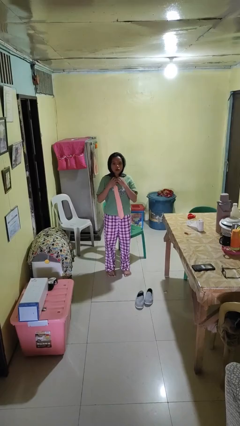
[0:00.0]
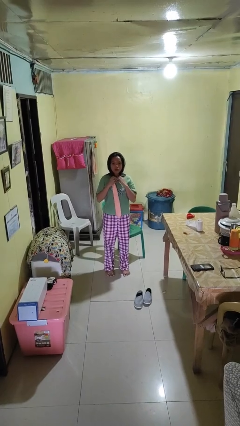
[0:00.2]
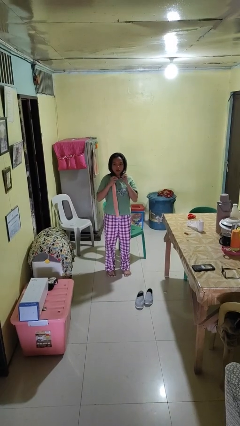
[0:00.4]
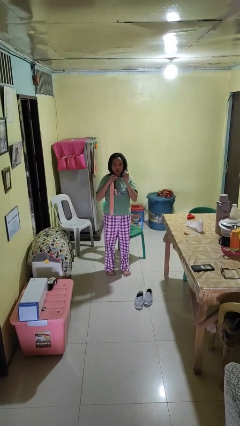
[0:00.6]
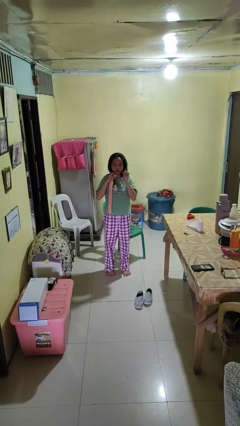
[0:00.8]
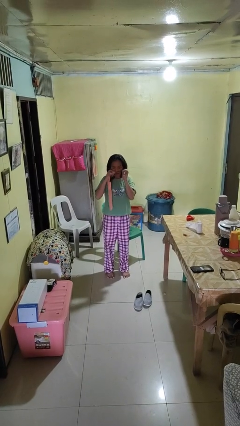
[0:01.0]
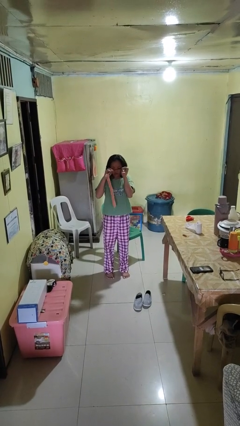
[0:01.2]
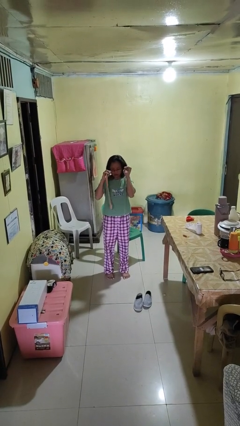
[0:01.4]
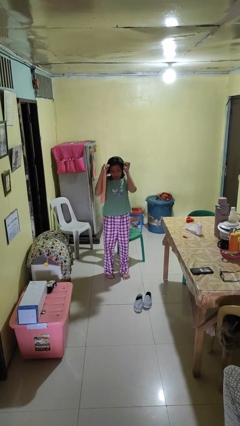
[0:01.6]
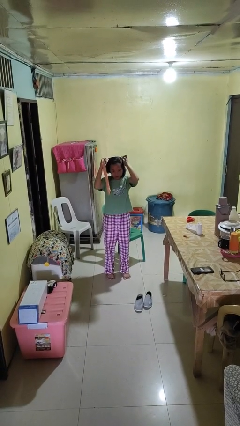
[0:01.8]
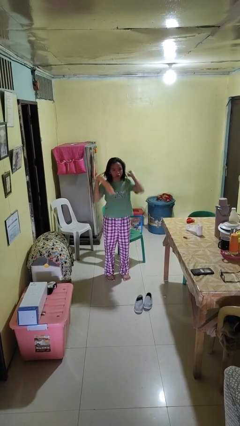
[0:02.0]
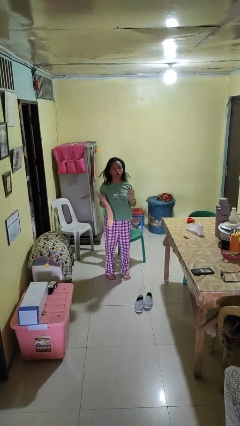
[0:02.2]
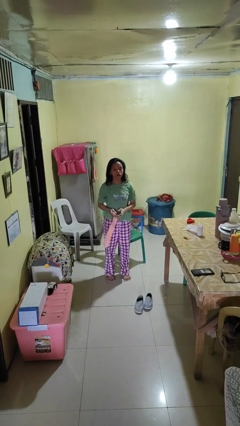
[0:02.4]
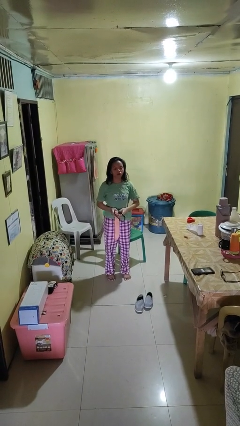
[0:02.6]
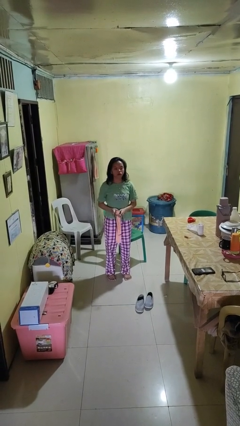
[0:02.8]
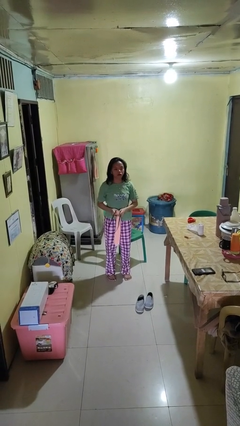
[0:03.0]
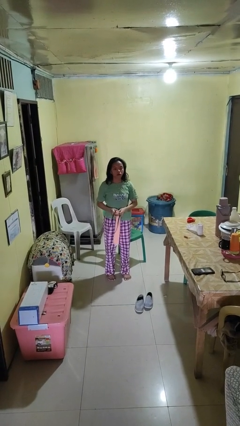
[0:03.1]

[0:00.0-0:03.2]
person takes off necktie

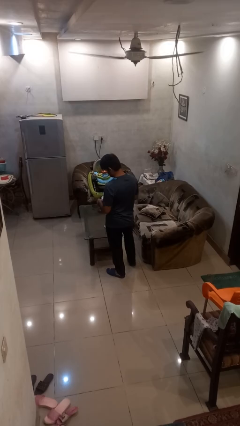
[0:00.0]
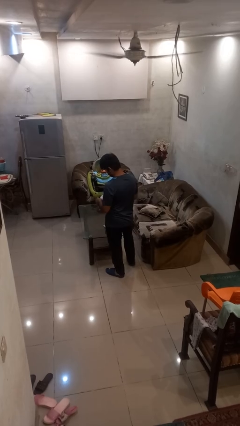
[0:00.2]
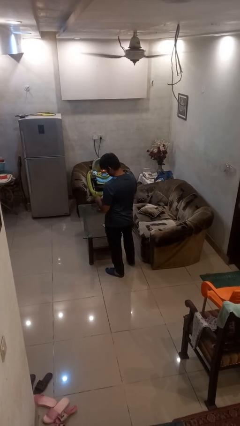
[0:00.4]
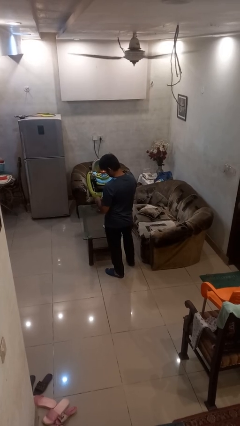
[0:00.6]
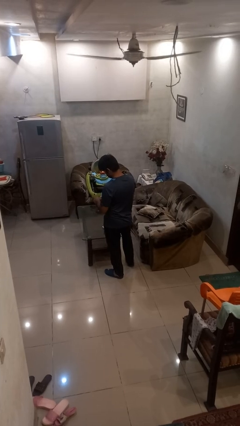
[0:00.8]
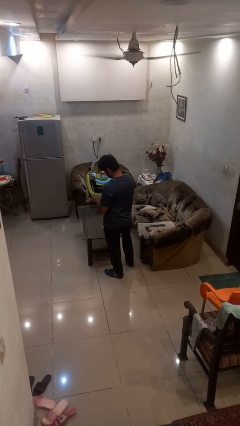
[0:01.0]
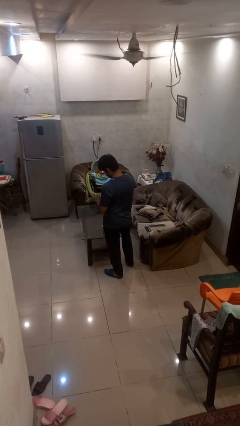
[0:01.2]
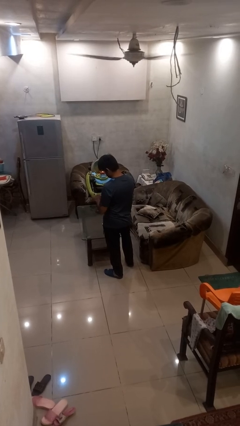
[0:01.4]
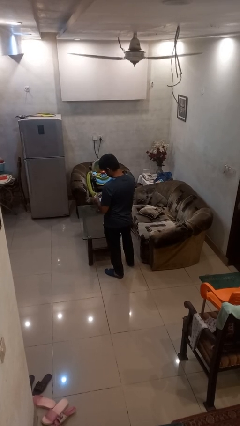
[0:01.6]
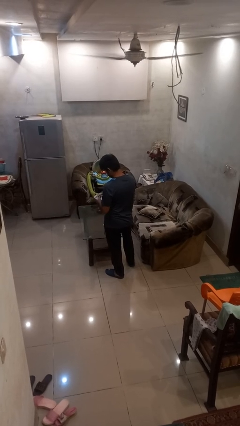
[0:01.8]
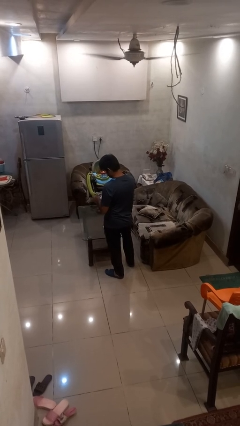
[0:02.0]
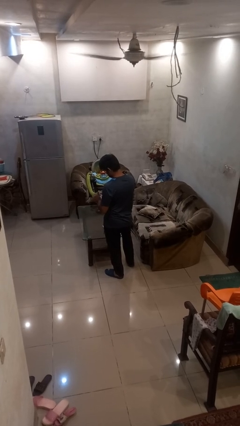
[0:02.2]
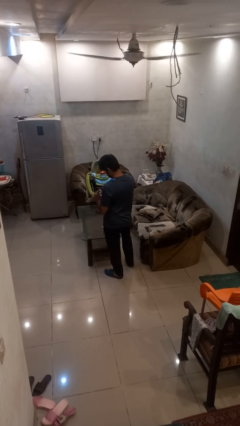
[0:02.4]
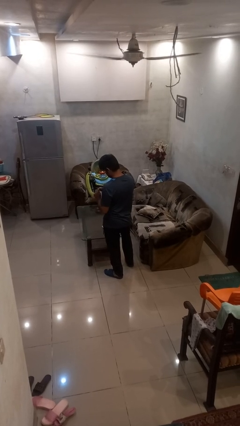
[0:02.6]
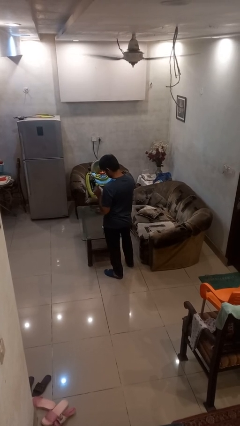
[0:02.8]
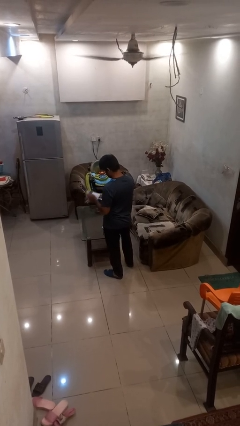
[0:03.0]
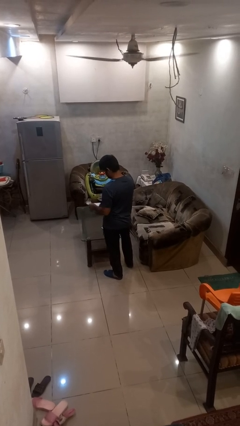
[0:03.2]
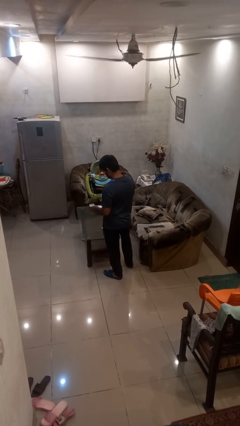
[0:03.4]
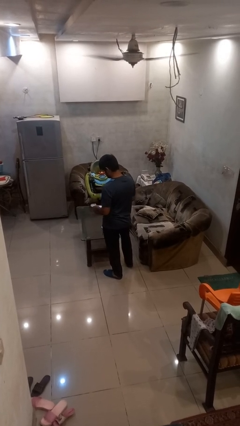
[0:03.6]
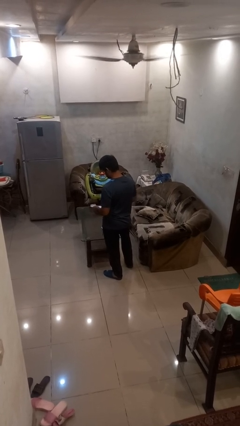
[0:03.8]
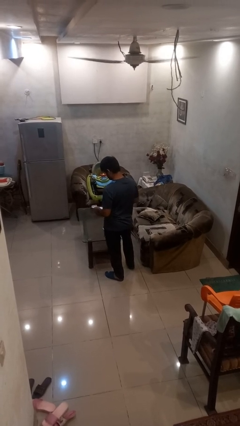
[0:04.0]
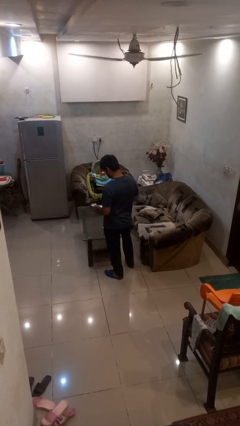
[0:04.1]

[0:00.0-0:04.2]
person tears paper

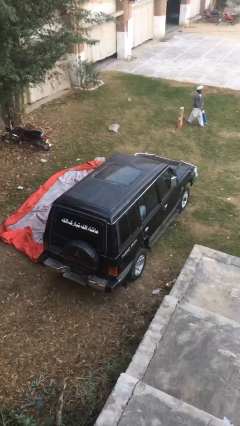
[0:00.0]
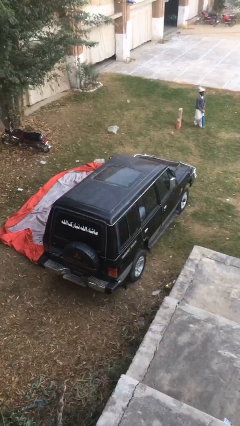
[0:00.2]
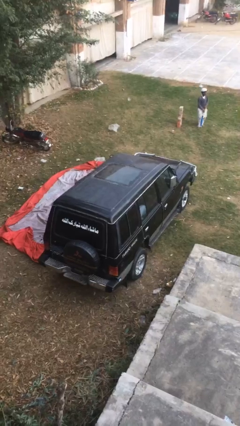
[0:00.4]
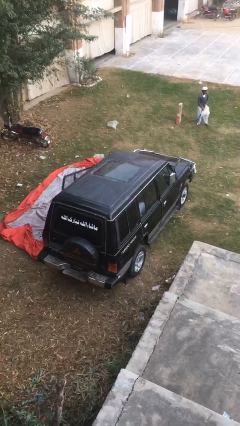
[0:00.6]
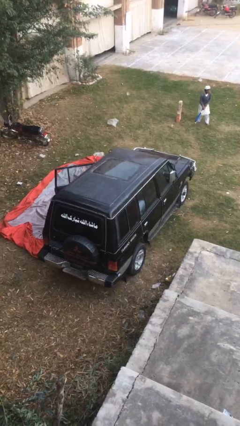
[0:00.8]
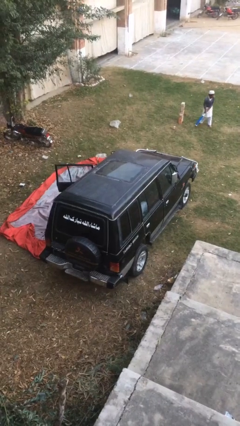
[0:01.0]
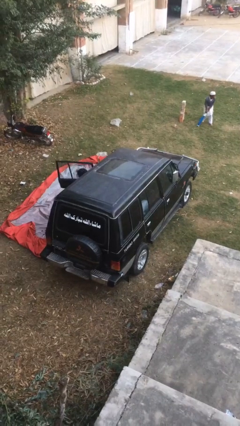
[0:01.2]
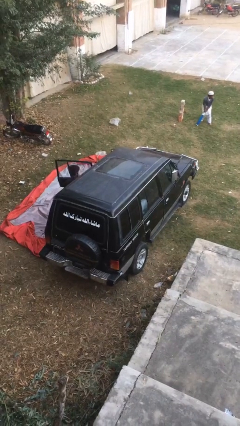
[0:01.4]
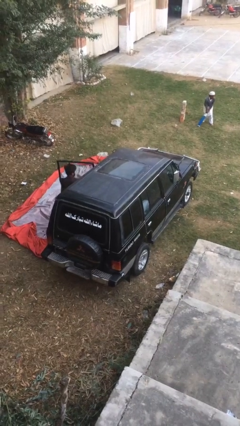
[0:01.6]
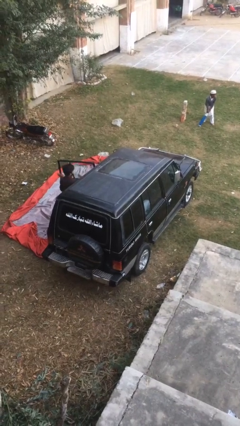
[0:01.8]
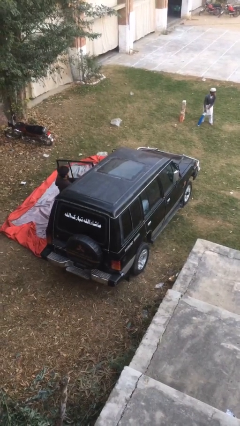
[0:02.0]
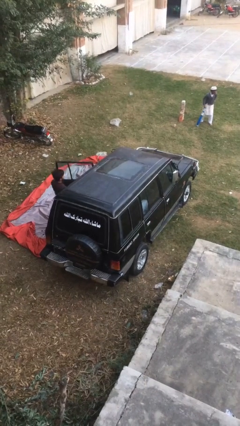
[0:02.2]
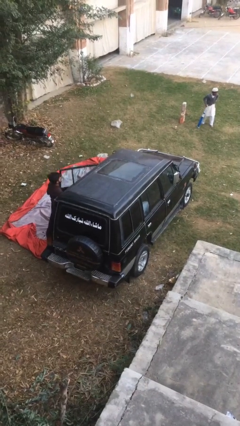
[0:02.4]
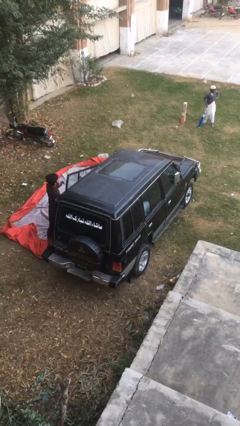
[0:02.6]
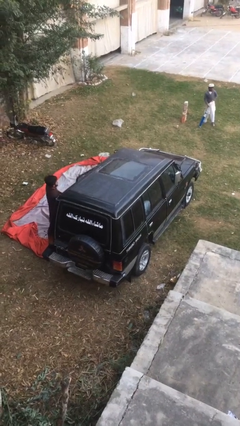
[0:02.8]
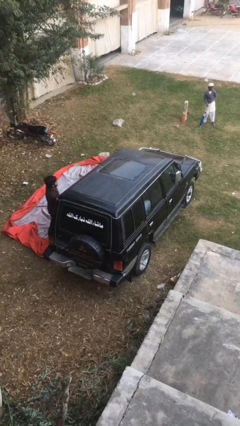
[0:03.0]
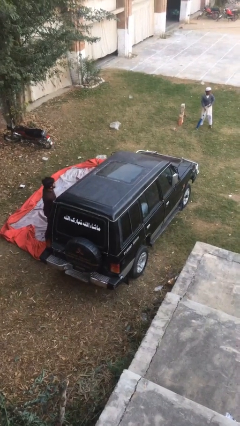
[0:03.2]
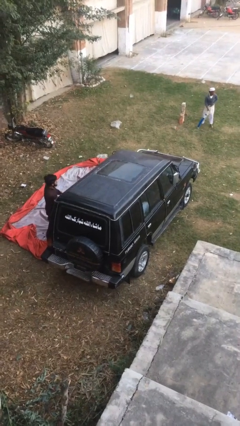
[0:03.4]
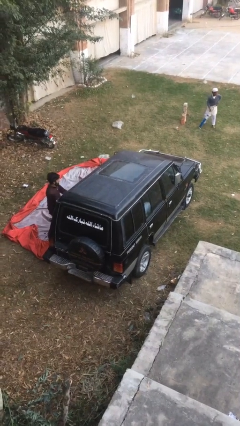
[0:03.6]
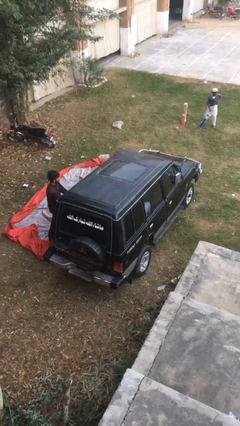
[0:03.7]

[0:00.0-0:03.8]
car drops off person

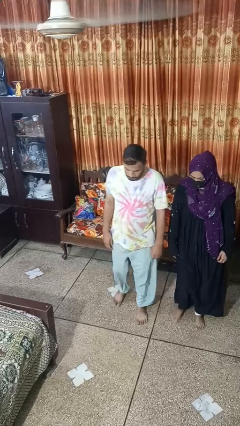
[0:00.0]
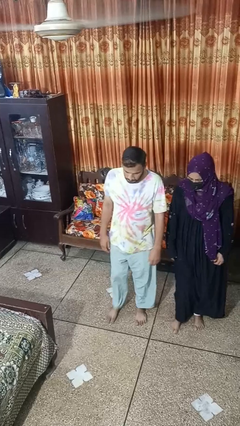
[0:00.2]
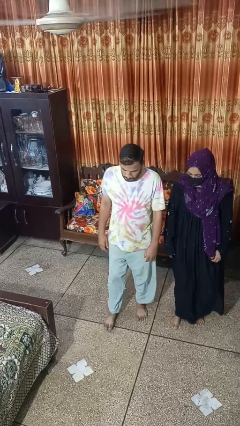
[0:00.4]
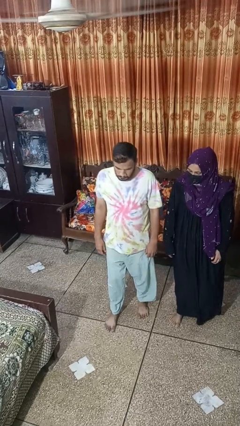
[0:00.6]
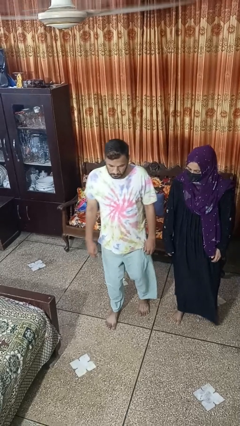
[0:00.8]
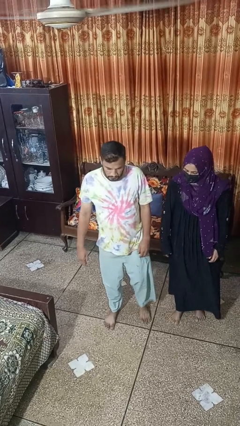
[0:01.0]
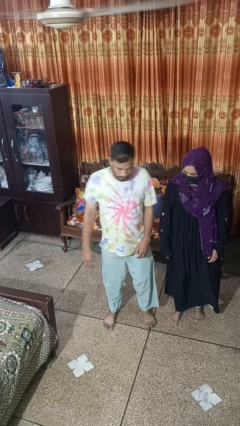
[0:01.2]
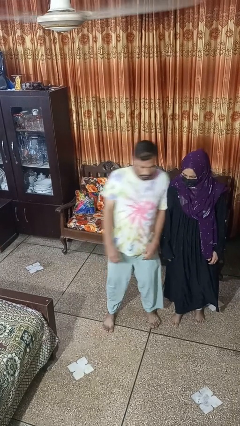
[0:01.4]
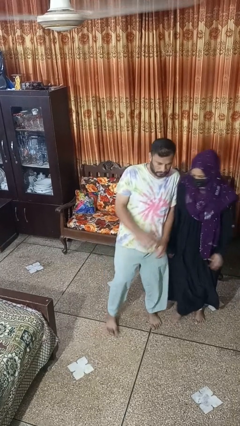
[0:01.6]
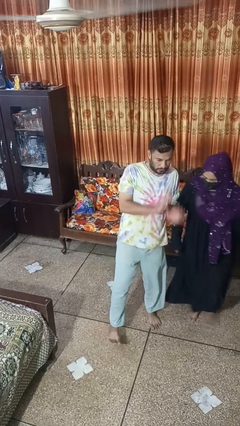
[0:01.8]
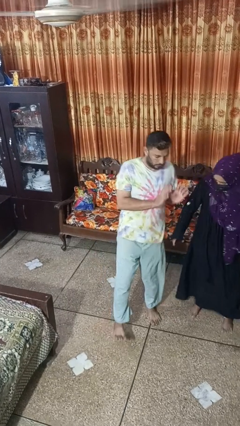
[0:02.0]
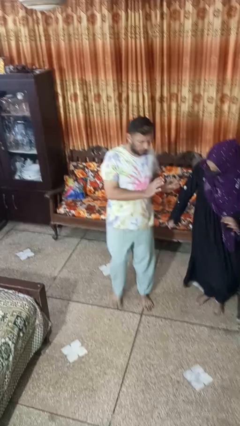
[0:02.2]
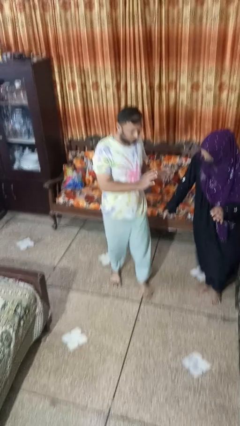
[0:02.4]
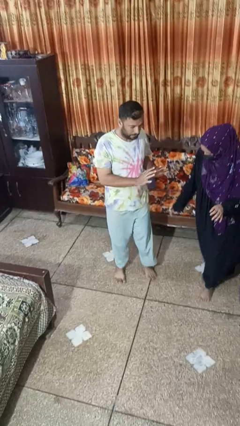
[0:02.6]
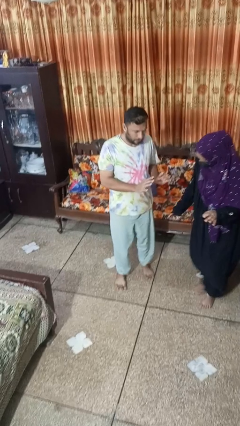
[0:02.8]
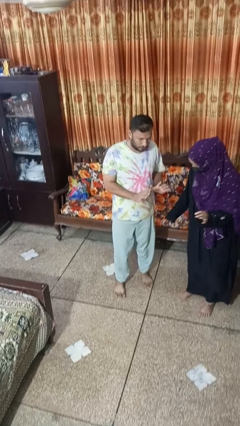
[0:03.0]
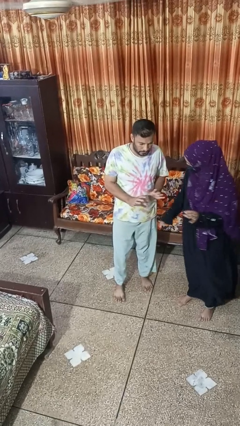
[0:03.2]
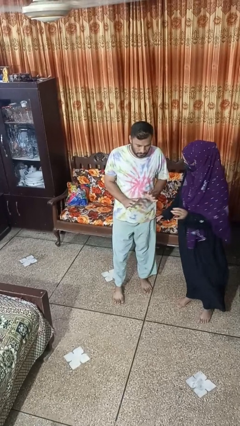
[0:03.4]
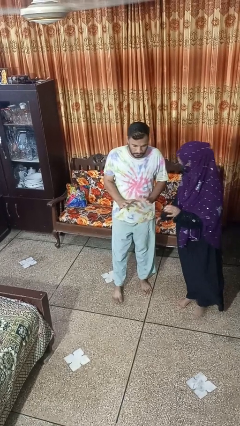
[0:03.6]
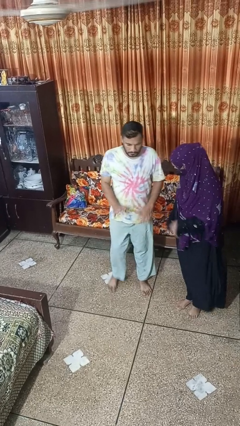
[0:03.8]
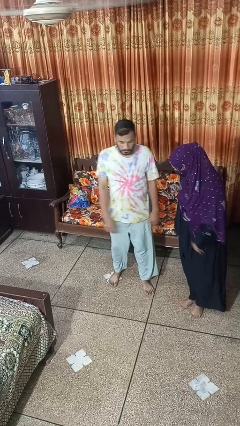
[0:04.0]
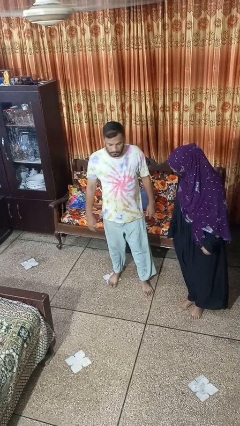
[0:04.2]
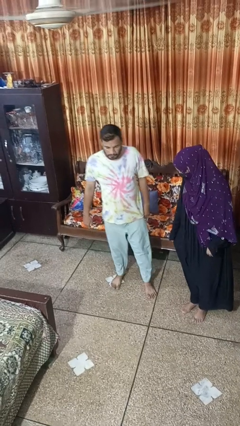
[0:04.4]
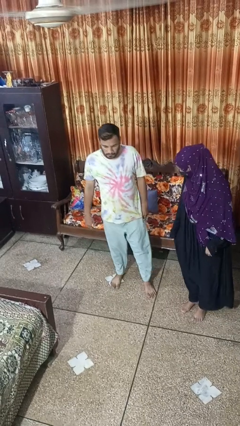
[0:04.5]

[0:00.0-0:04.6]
person bumps into person

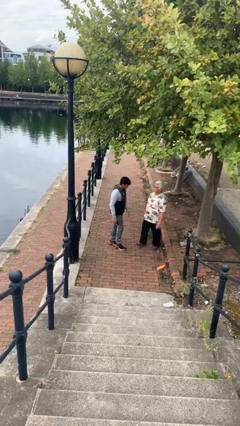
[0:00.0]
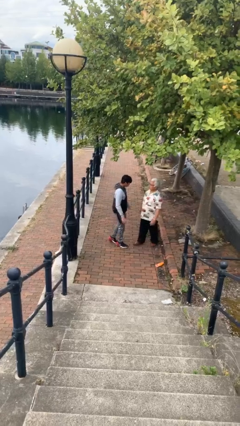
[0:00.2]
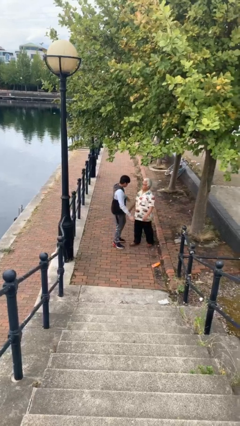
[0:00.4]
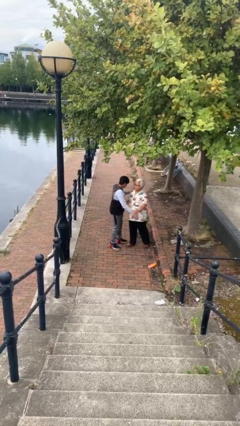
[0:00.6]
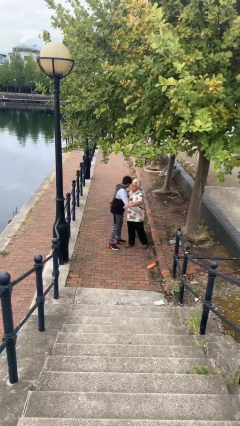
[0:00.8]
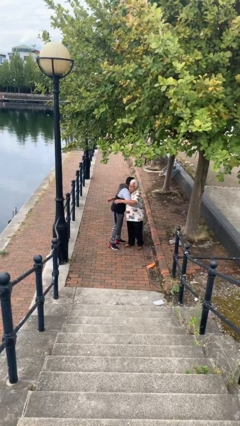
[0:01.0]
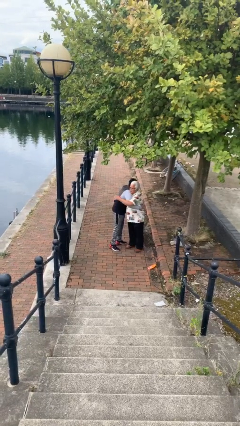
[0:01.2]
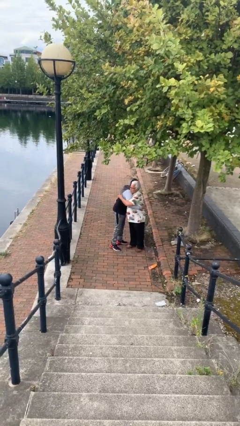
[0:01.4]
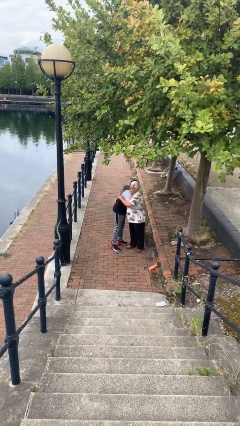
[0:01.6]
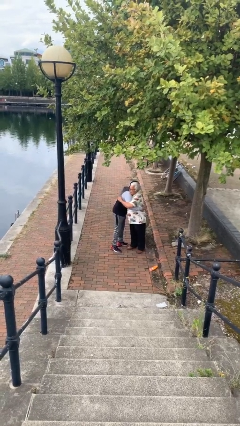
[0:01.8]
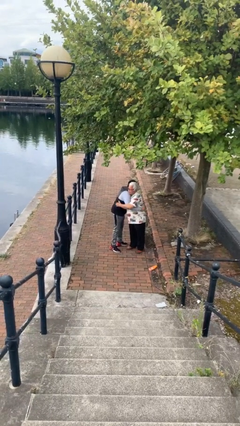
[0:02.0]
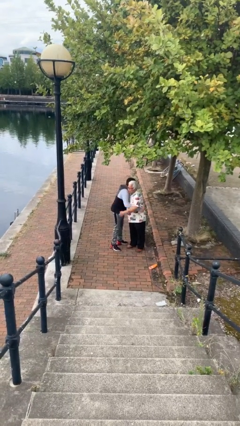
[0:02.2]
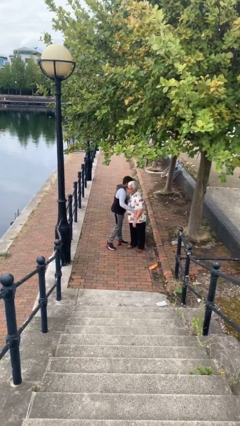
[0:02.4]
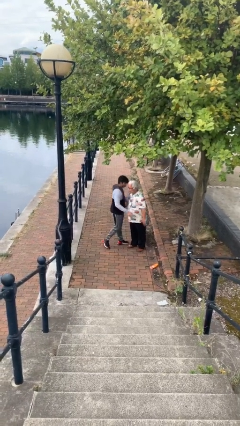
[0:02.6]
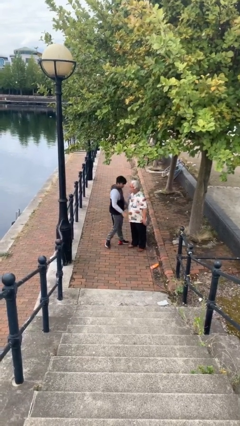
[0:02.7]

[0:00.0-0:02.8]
person embraces person
